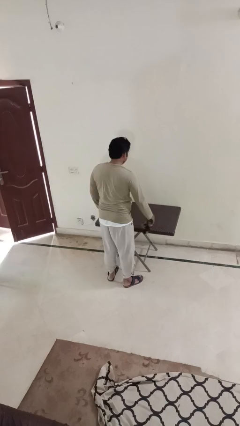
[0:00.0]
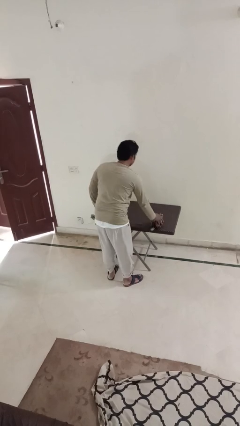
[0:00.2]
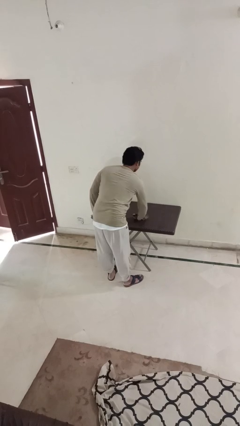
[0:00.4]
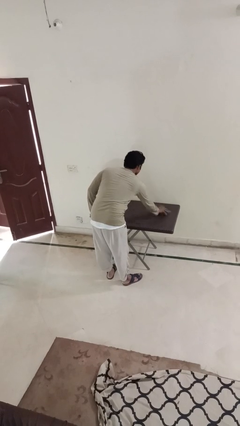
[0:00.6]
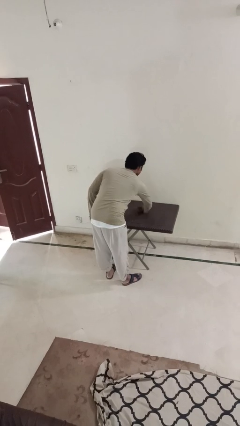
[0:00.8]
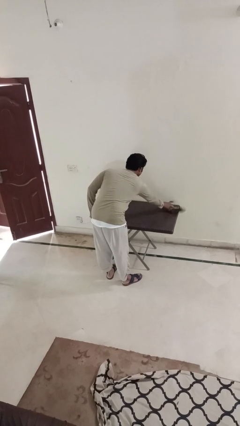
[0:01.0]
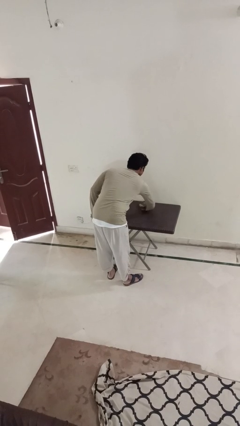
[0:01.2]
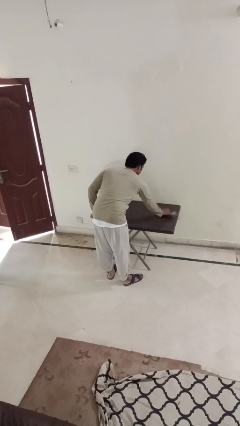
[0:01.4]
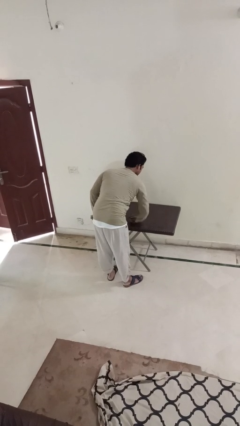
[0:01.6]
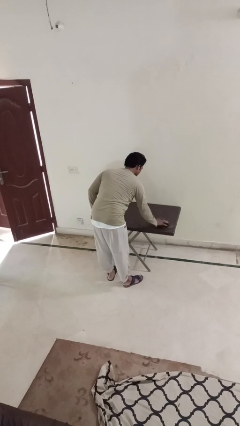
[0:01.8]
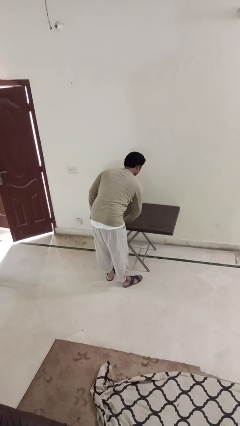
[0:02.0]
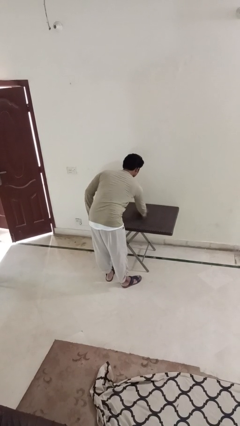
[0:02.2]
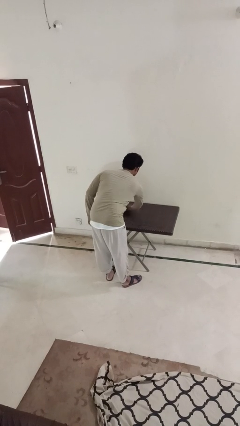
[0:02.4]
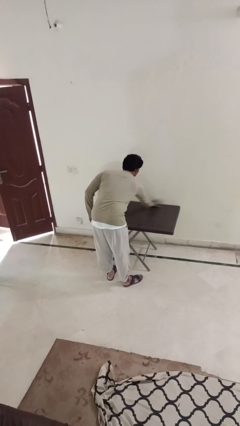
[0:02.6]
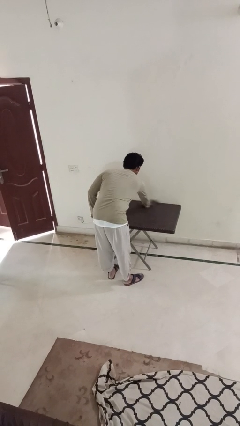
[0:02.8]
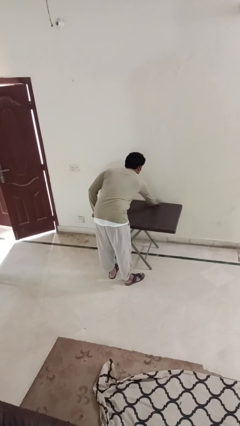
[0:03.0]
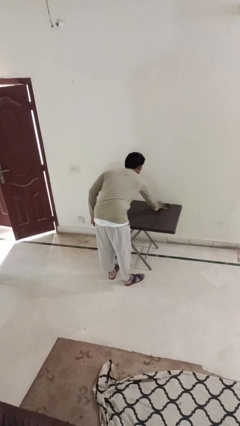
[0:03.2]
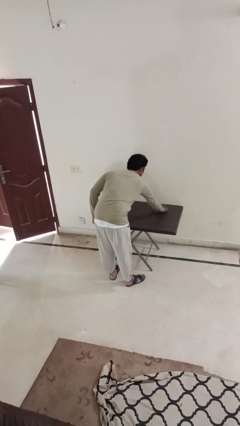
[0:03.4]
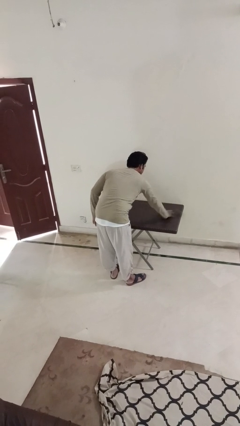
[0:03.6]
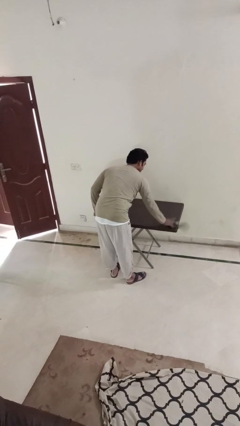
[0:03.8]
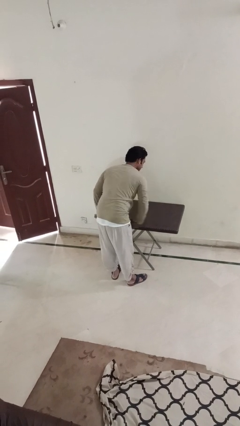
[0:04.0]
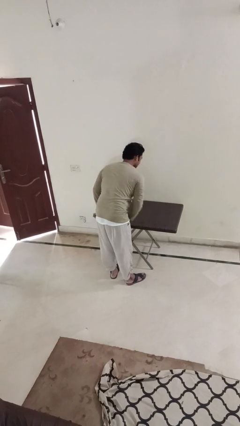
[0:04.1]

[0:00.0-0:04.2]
person cleans table with rag

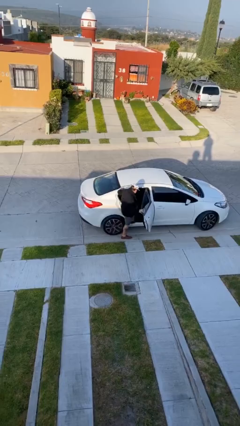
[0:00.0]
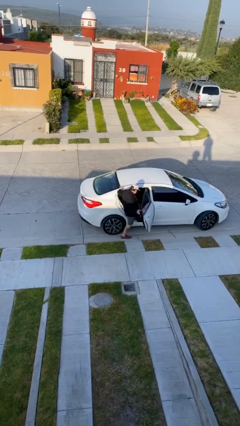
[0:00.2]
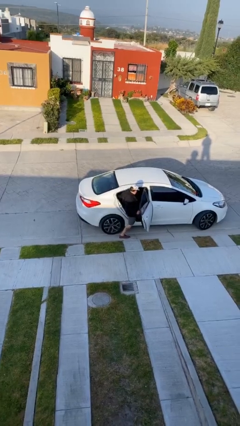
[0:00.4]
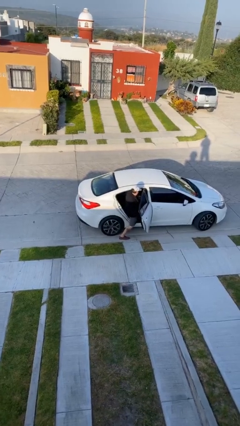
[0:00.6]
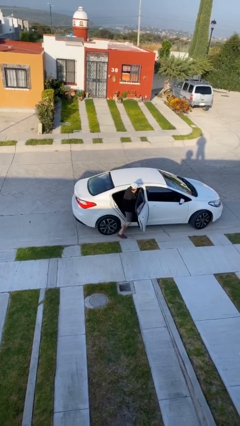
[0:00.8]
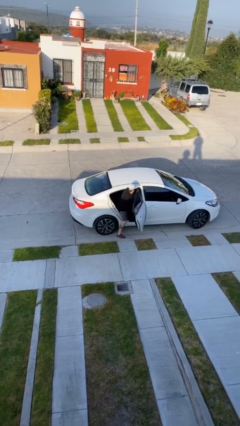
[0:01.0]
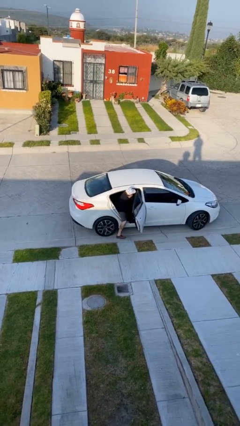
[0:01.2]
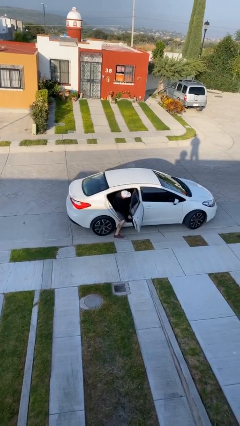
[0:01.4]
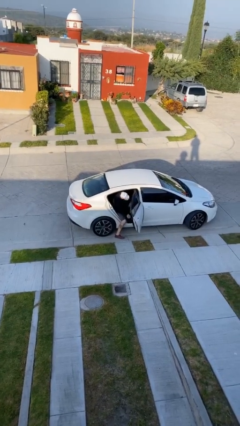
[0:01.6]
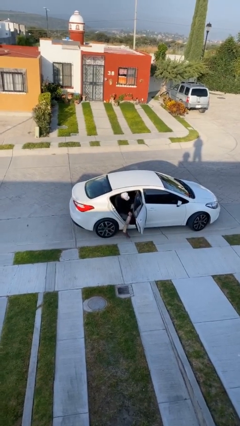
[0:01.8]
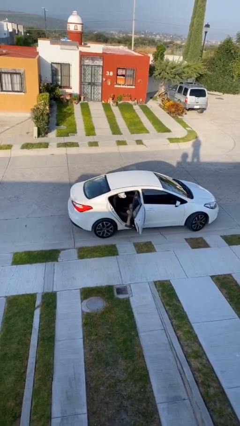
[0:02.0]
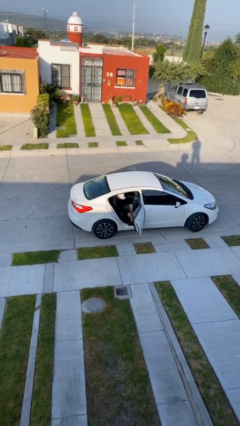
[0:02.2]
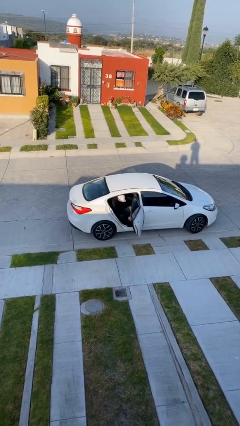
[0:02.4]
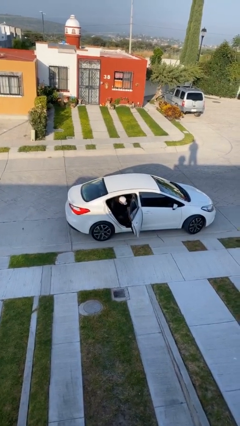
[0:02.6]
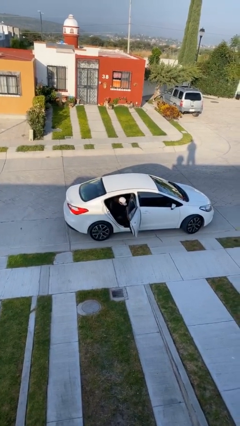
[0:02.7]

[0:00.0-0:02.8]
person enters car

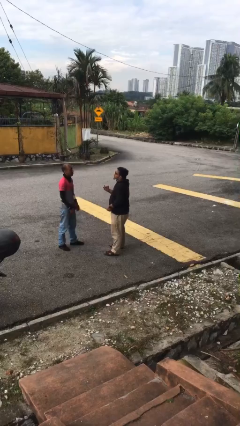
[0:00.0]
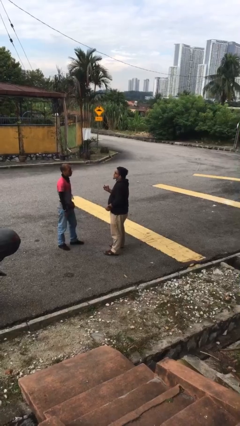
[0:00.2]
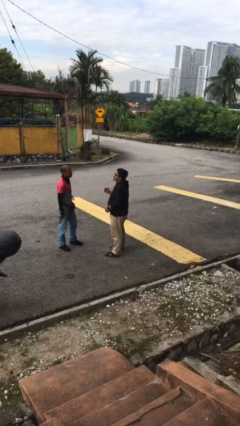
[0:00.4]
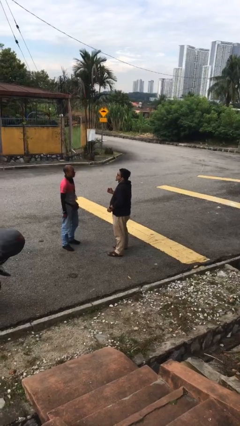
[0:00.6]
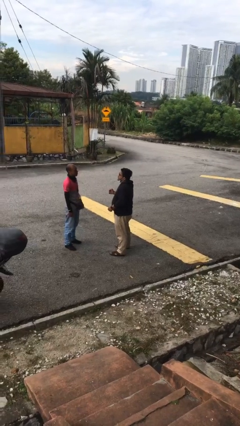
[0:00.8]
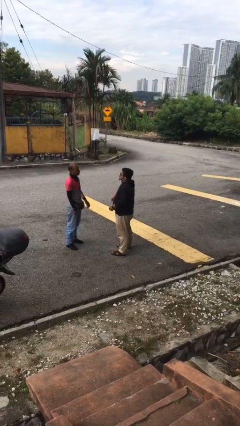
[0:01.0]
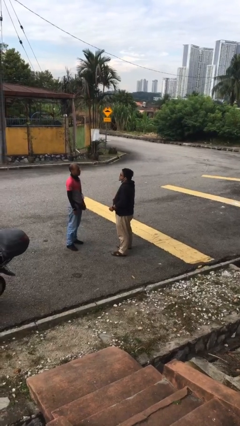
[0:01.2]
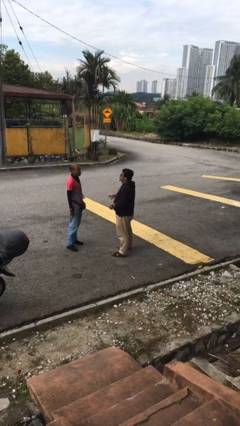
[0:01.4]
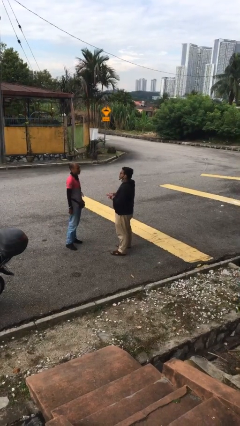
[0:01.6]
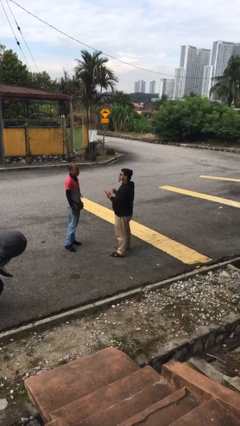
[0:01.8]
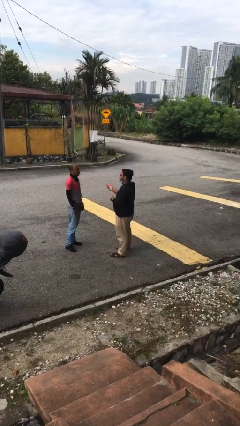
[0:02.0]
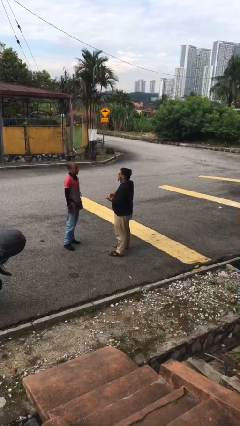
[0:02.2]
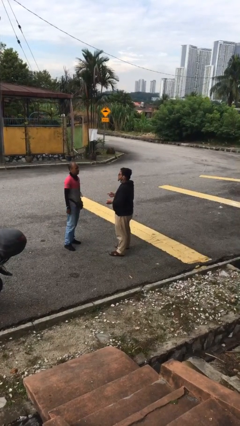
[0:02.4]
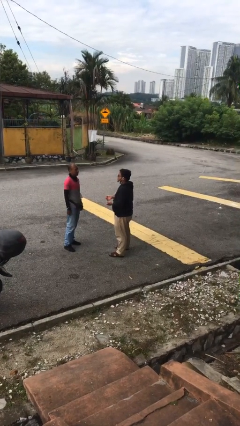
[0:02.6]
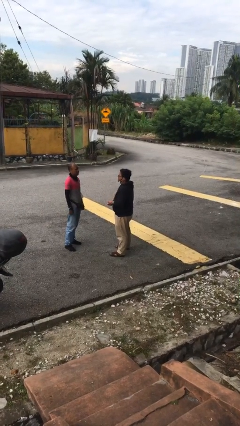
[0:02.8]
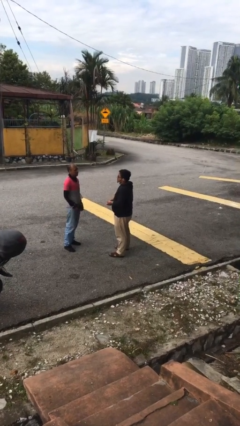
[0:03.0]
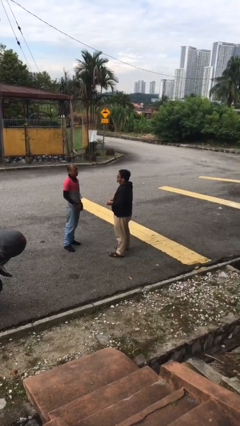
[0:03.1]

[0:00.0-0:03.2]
person talks to person

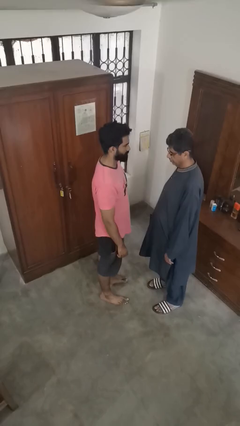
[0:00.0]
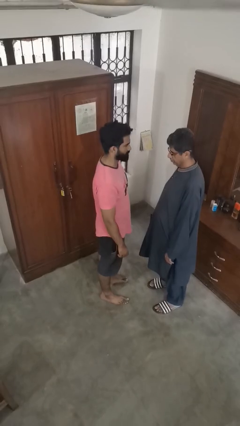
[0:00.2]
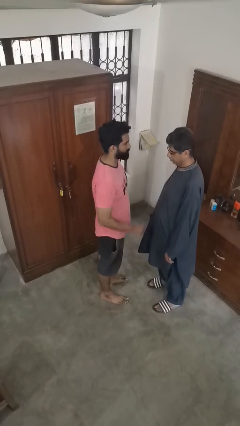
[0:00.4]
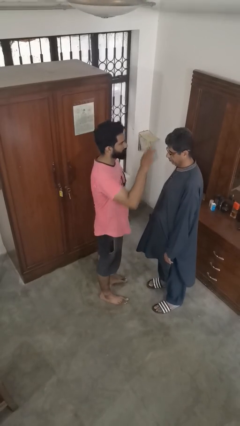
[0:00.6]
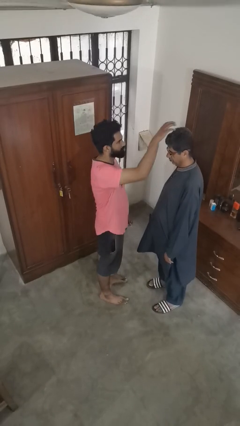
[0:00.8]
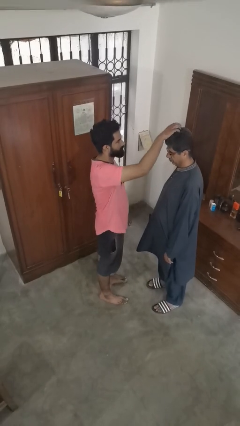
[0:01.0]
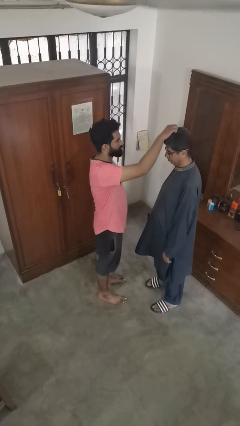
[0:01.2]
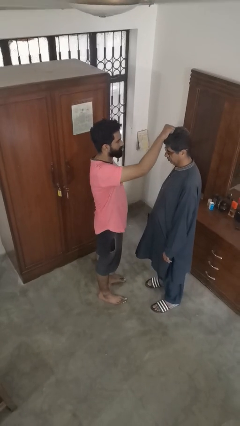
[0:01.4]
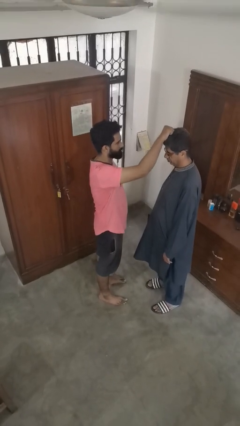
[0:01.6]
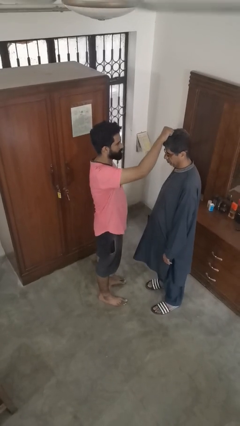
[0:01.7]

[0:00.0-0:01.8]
person grabs person by hair

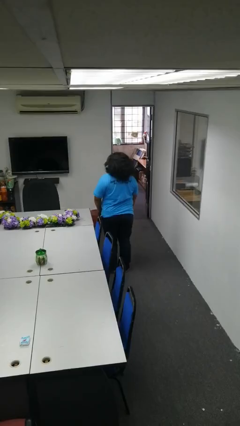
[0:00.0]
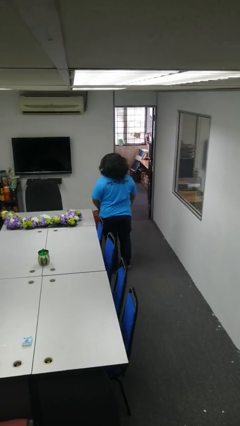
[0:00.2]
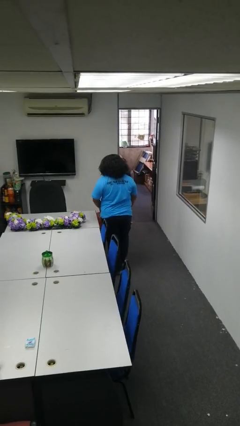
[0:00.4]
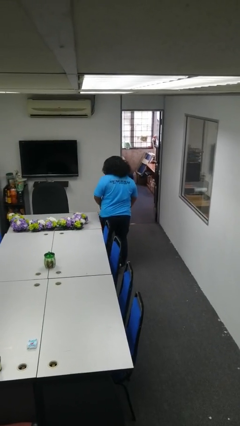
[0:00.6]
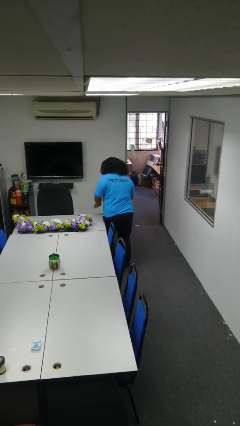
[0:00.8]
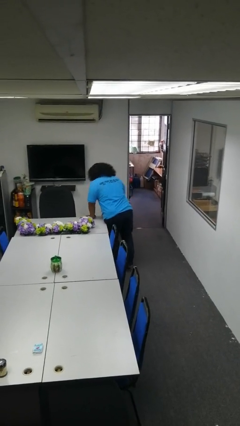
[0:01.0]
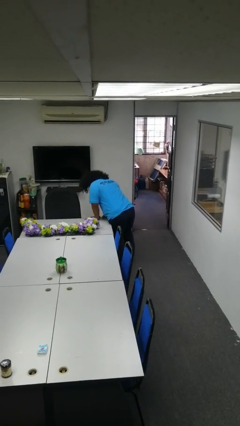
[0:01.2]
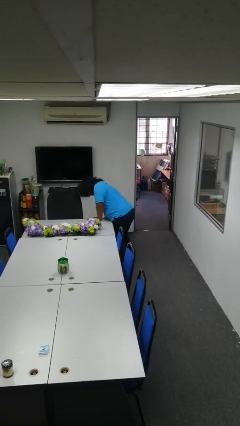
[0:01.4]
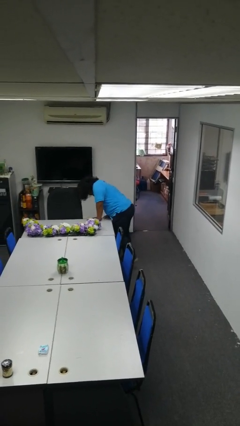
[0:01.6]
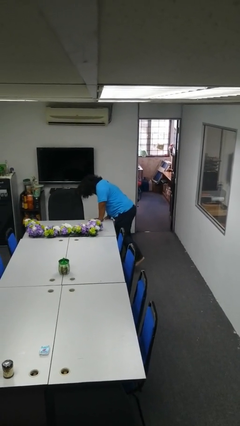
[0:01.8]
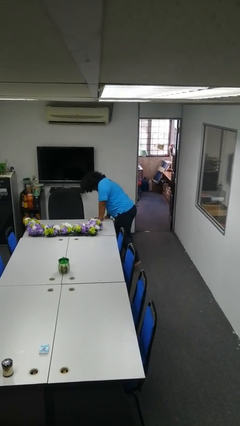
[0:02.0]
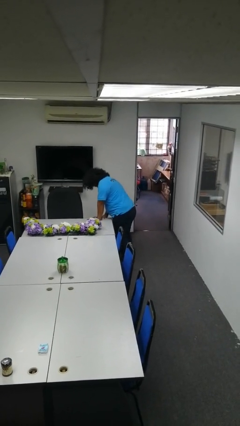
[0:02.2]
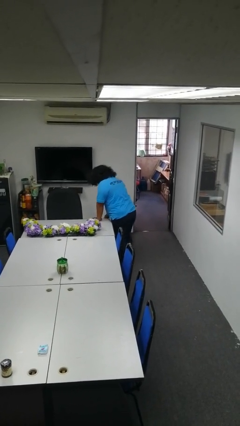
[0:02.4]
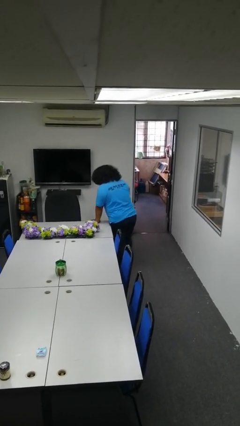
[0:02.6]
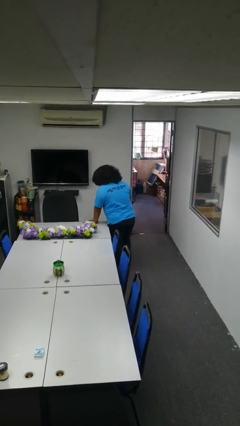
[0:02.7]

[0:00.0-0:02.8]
person bumps into table

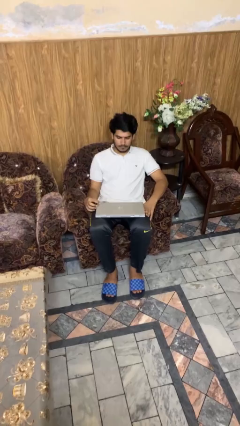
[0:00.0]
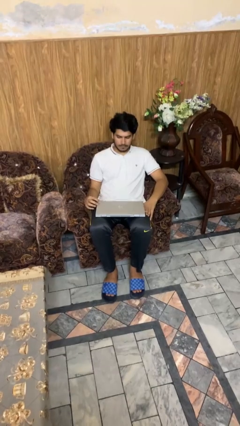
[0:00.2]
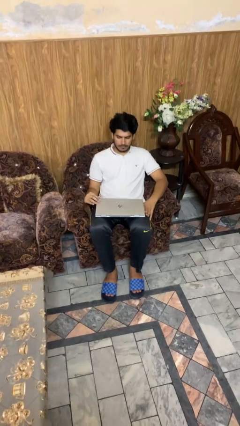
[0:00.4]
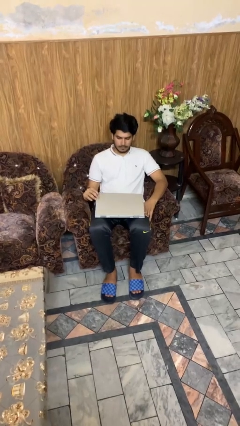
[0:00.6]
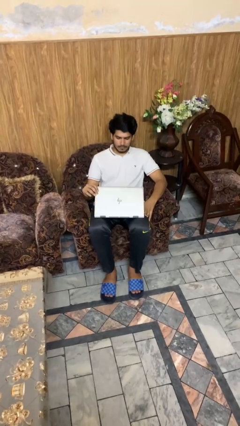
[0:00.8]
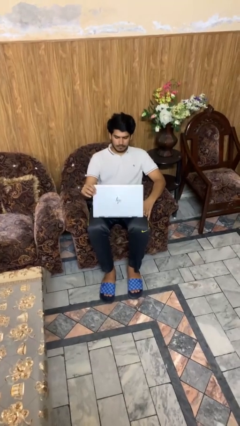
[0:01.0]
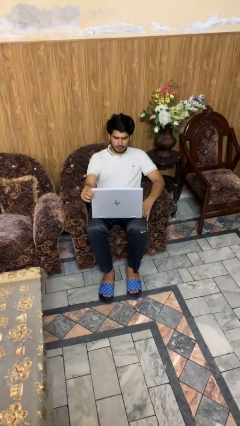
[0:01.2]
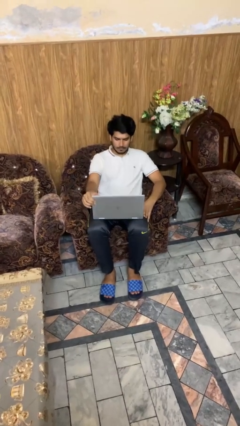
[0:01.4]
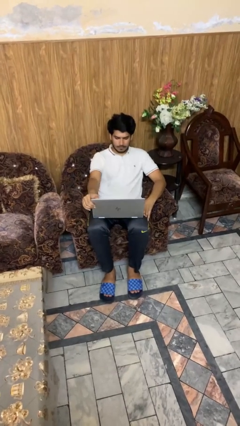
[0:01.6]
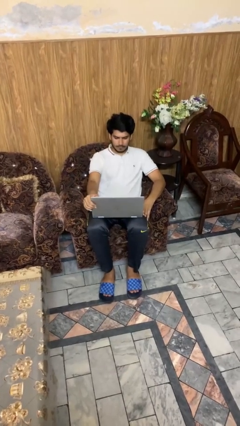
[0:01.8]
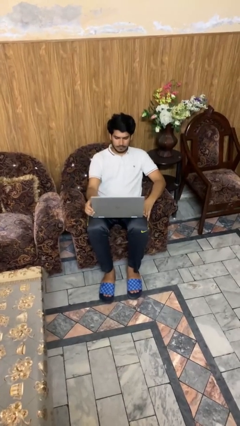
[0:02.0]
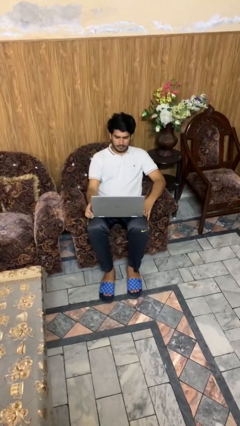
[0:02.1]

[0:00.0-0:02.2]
person opens laptop
